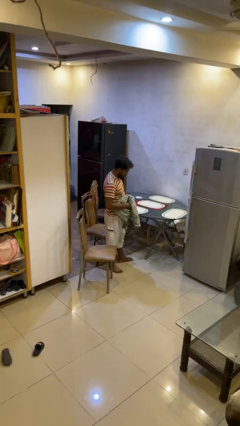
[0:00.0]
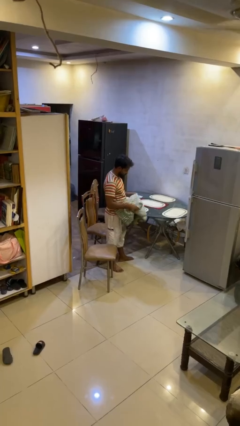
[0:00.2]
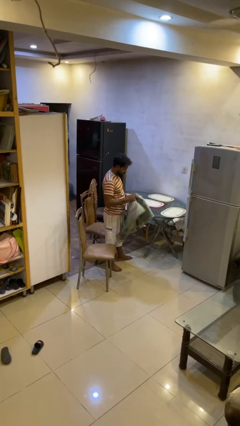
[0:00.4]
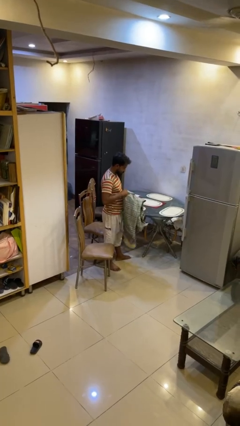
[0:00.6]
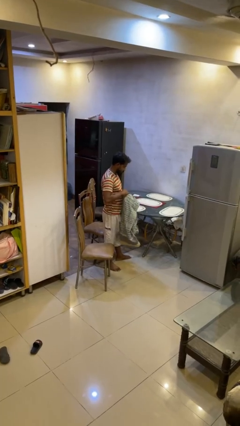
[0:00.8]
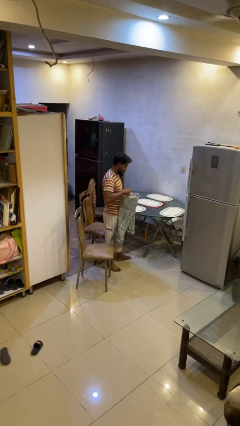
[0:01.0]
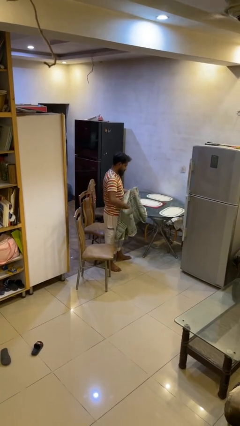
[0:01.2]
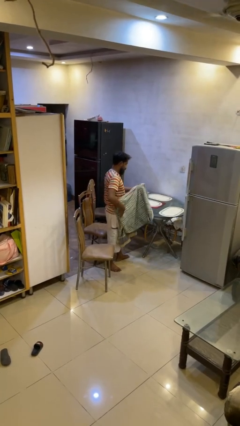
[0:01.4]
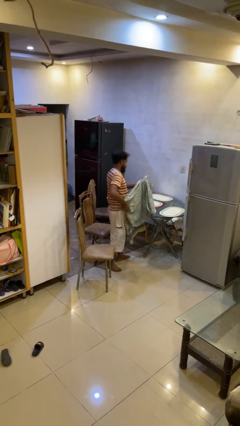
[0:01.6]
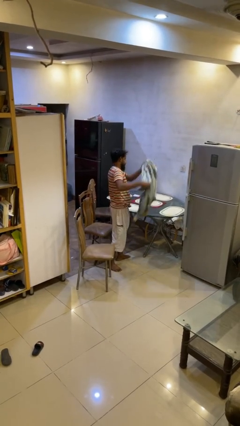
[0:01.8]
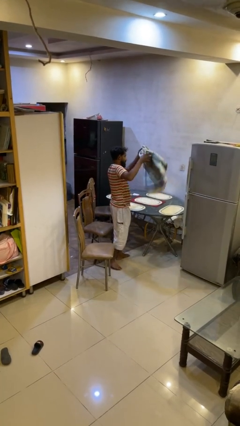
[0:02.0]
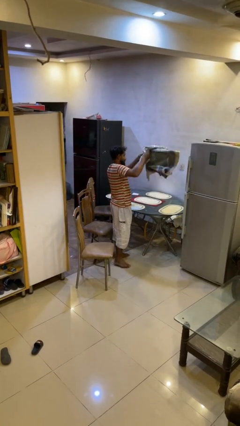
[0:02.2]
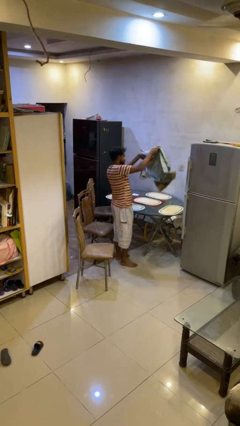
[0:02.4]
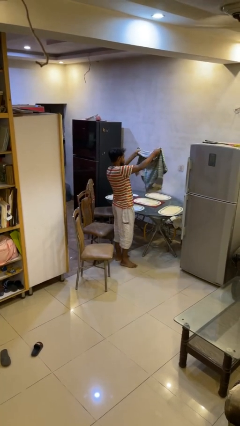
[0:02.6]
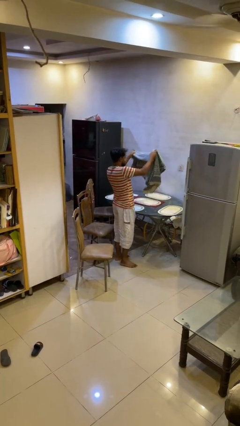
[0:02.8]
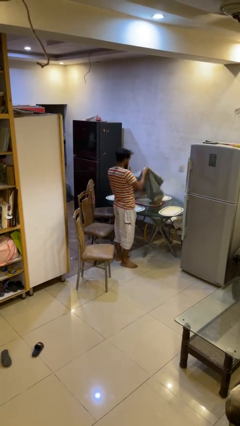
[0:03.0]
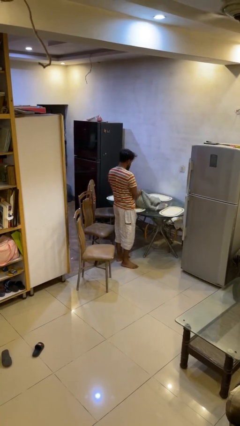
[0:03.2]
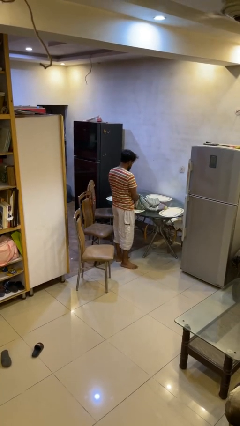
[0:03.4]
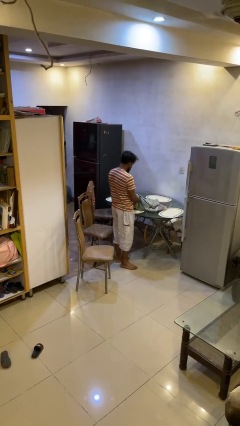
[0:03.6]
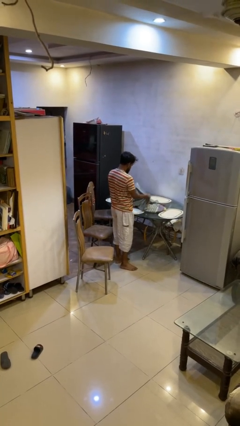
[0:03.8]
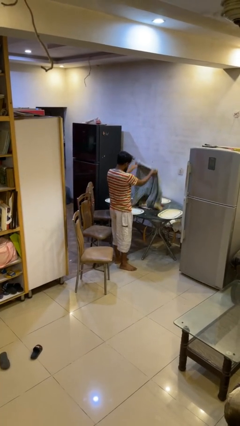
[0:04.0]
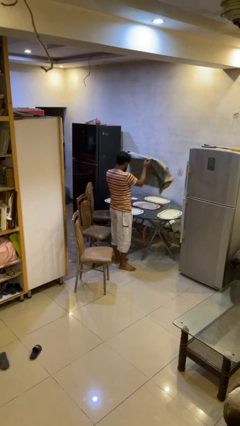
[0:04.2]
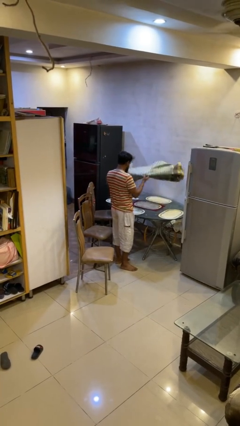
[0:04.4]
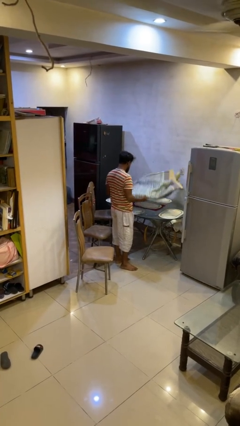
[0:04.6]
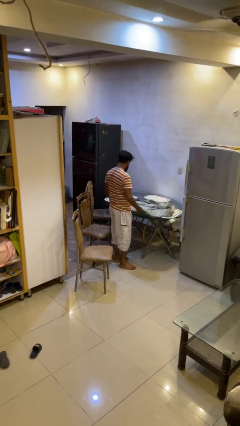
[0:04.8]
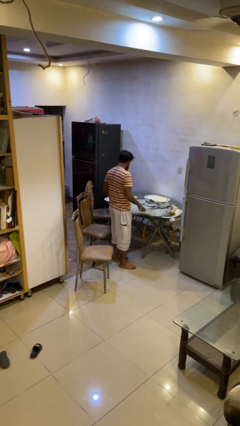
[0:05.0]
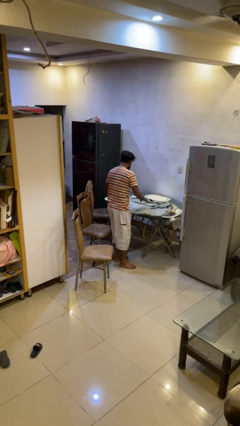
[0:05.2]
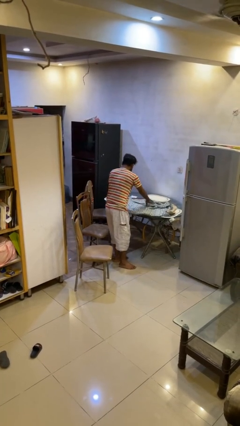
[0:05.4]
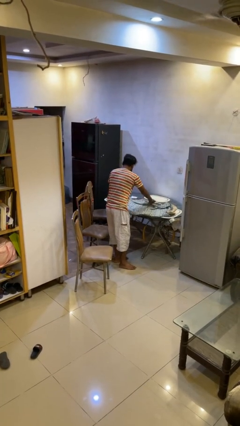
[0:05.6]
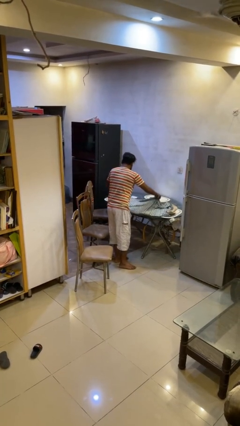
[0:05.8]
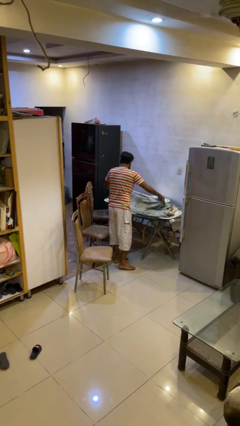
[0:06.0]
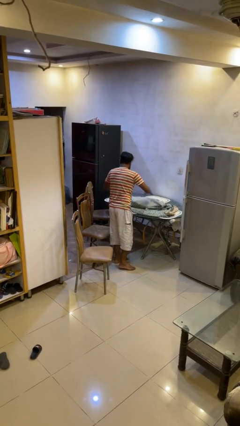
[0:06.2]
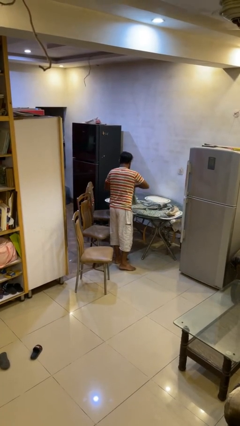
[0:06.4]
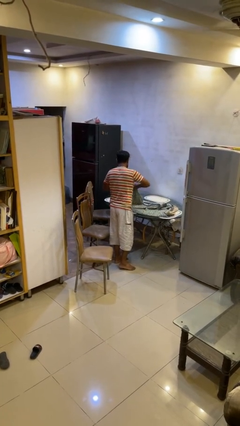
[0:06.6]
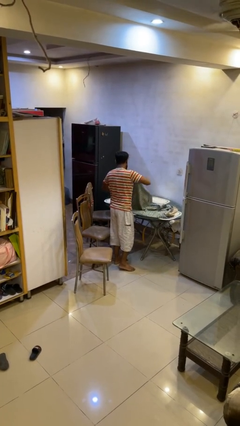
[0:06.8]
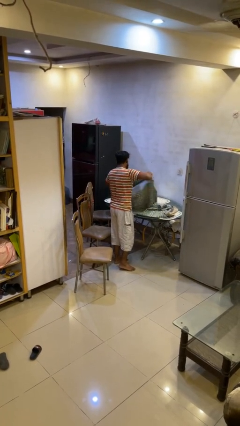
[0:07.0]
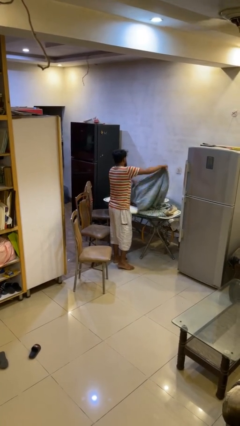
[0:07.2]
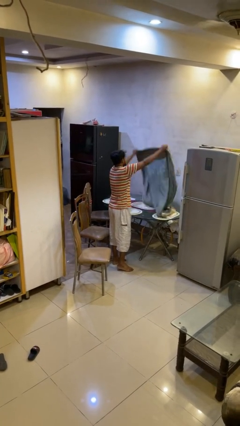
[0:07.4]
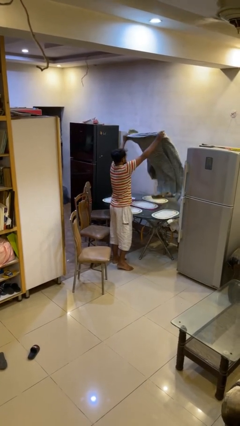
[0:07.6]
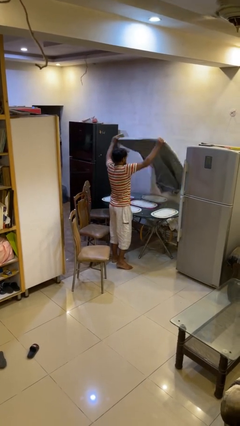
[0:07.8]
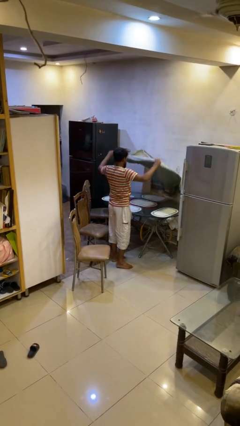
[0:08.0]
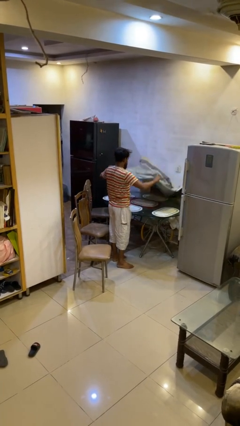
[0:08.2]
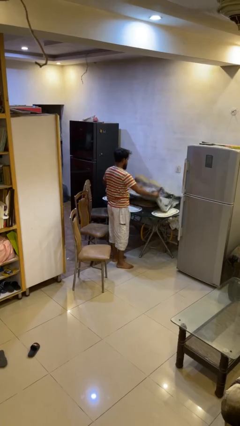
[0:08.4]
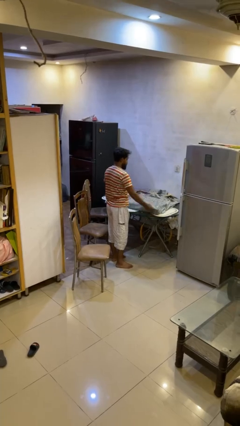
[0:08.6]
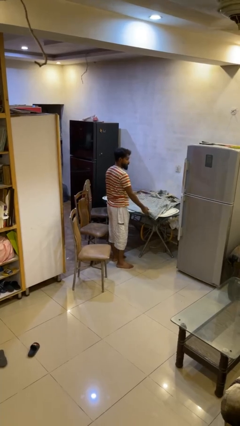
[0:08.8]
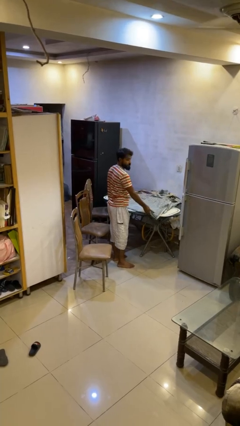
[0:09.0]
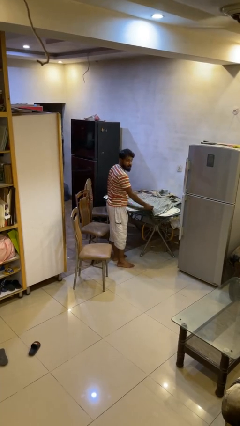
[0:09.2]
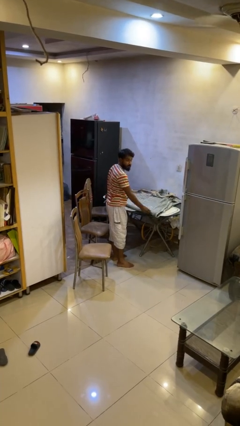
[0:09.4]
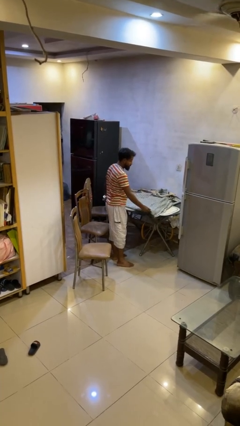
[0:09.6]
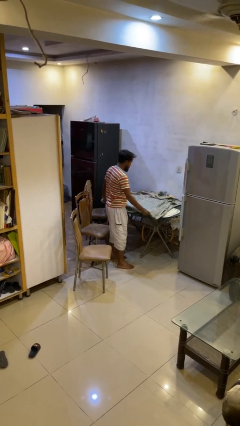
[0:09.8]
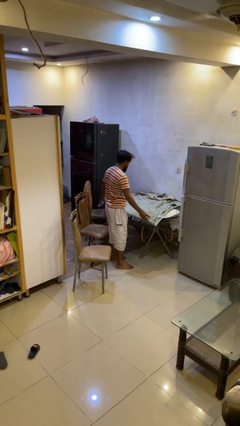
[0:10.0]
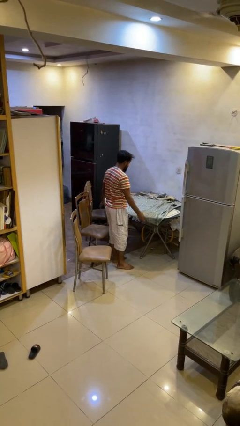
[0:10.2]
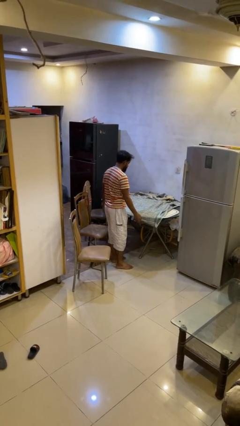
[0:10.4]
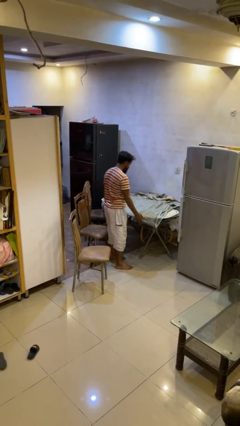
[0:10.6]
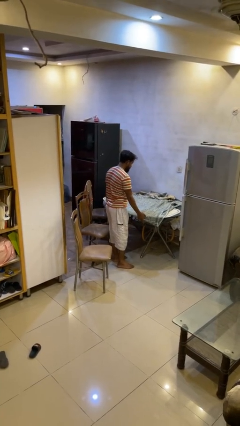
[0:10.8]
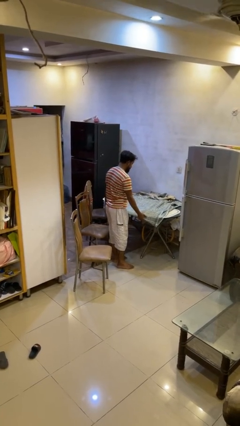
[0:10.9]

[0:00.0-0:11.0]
person spreads tablecloth

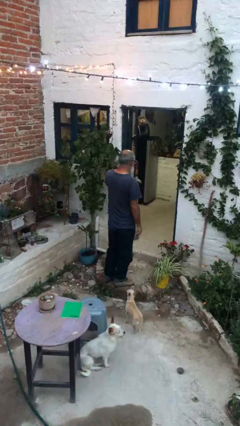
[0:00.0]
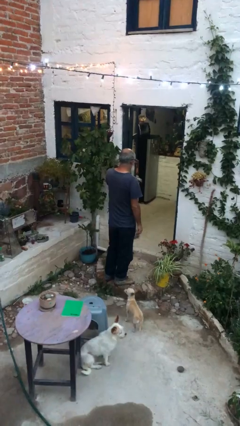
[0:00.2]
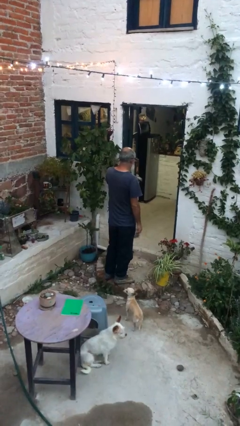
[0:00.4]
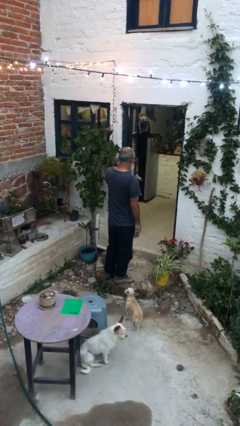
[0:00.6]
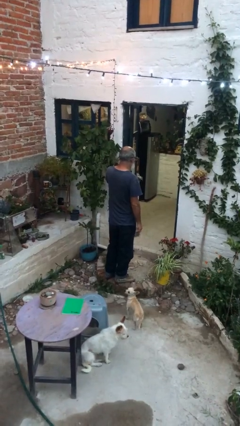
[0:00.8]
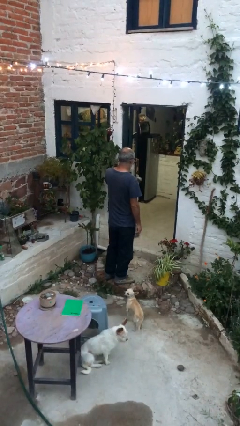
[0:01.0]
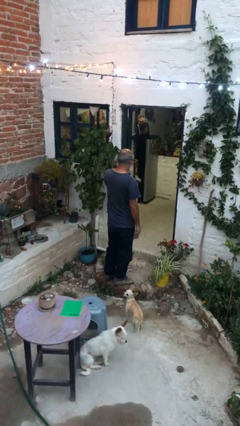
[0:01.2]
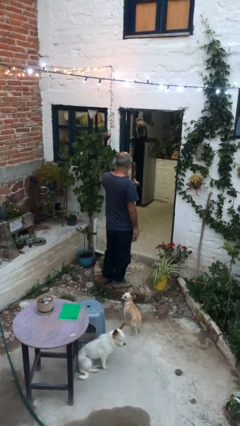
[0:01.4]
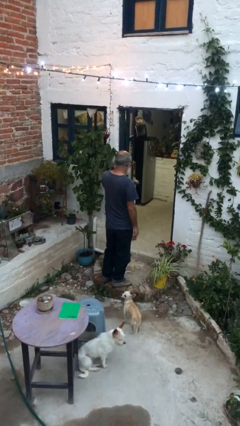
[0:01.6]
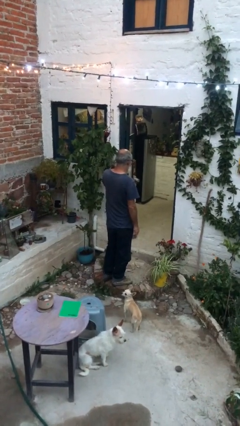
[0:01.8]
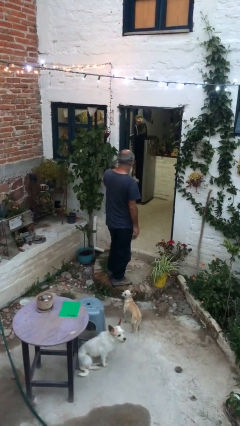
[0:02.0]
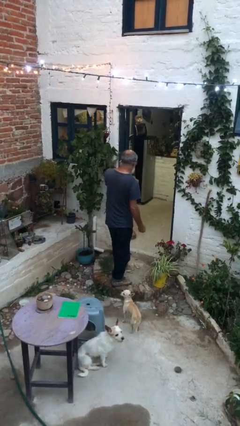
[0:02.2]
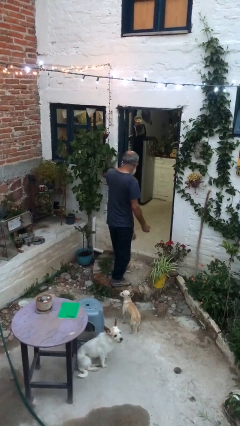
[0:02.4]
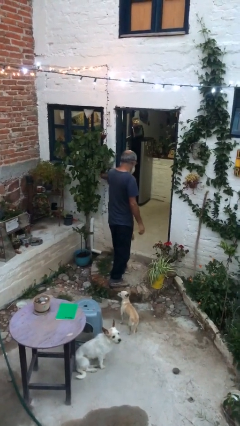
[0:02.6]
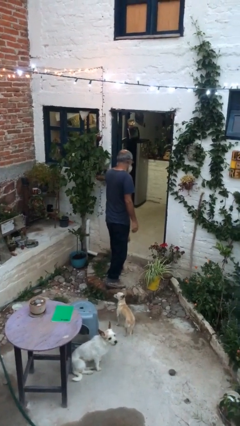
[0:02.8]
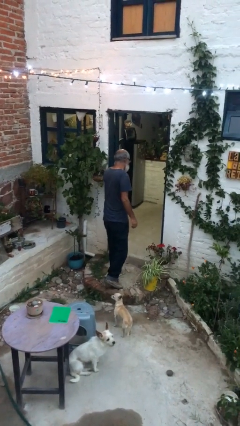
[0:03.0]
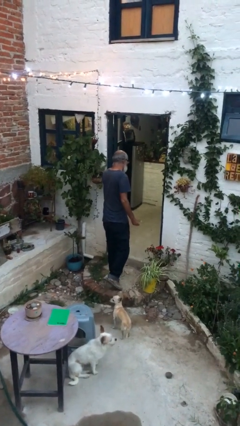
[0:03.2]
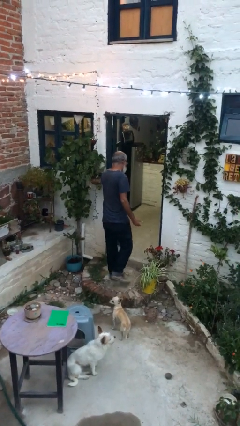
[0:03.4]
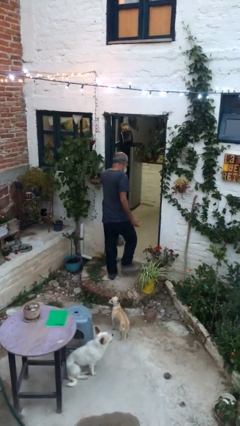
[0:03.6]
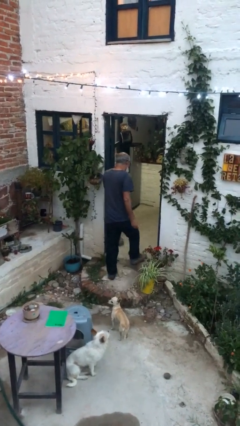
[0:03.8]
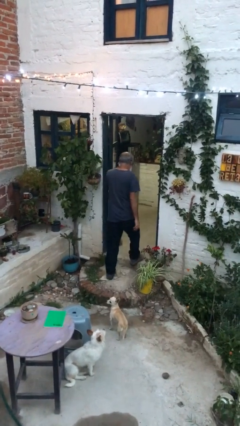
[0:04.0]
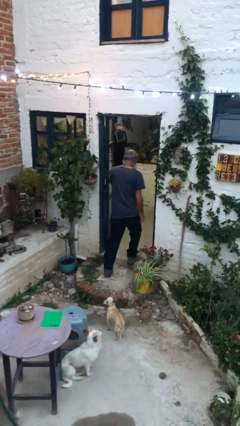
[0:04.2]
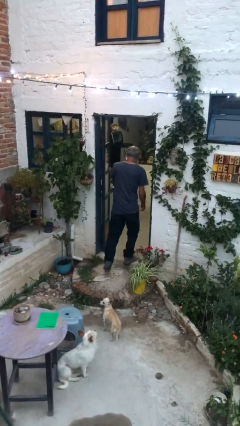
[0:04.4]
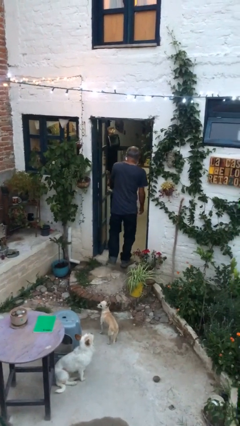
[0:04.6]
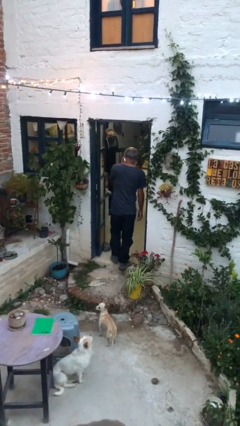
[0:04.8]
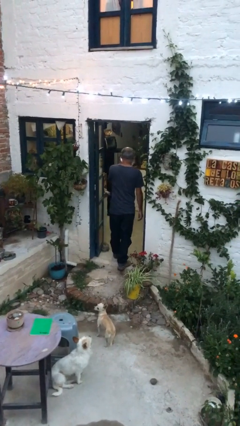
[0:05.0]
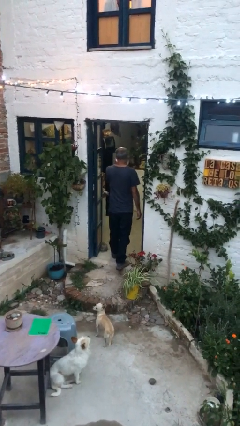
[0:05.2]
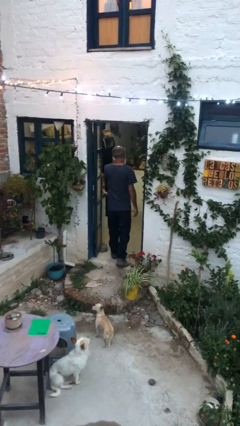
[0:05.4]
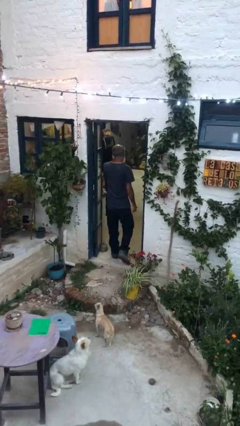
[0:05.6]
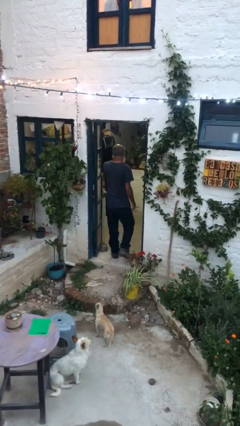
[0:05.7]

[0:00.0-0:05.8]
person exits scene through structure

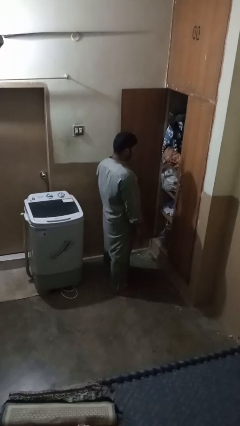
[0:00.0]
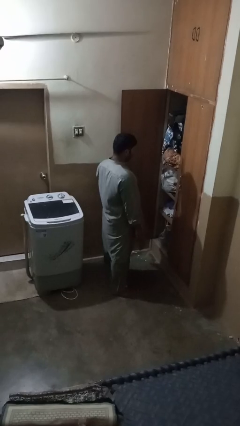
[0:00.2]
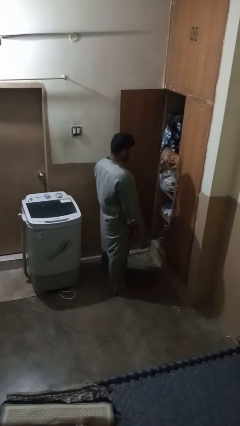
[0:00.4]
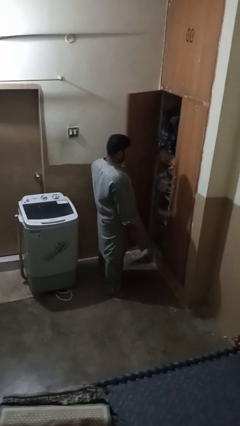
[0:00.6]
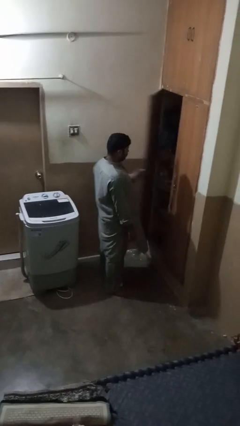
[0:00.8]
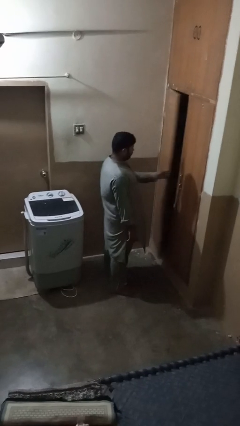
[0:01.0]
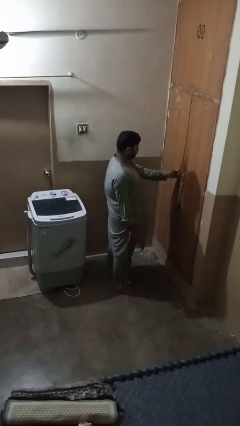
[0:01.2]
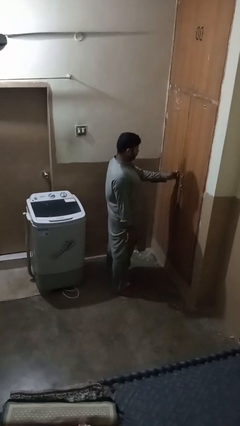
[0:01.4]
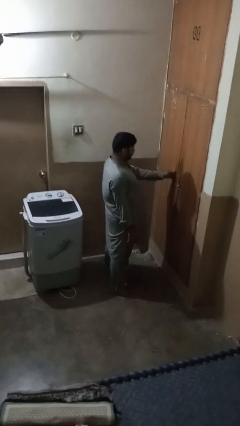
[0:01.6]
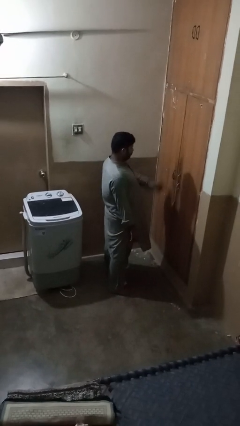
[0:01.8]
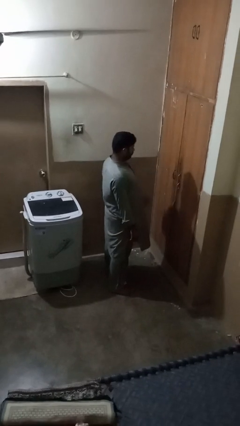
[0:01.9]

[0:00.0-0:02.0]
person closes closet door
